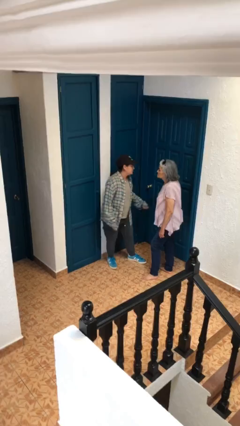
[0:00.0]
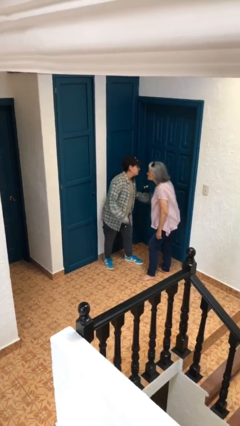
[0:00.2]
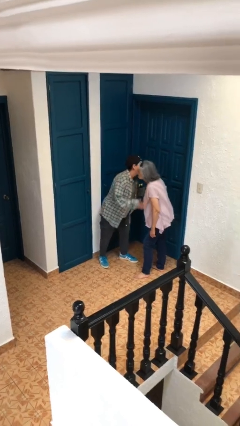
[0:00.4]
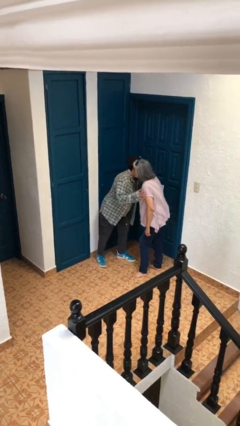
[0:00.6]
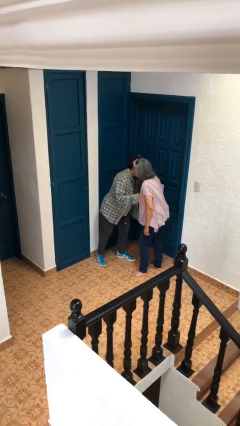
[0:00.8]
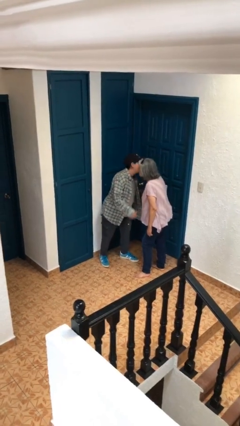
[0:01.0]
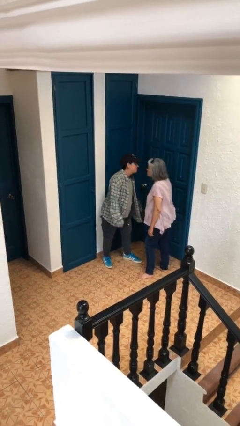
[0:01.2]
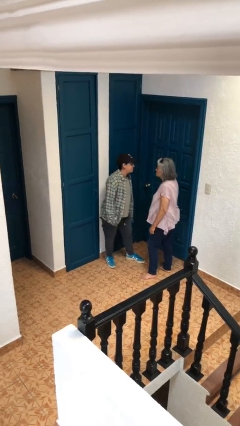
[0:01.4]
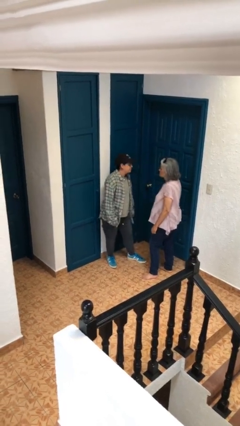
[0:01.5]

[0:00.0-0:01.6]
person kisses cheek of person

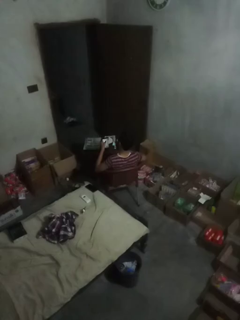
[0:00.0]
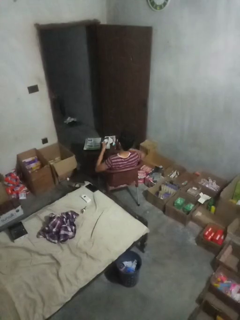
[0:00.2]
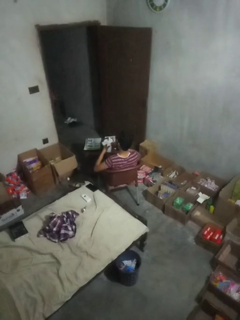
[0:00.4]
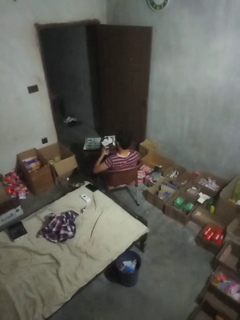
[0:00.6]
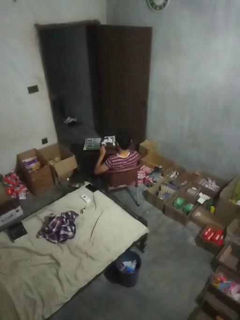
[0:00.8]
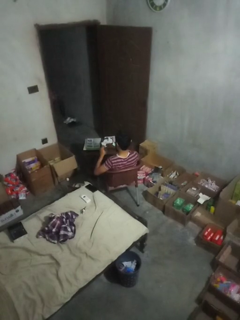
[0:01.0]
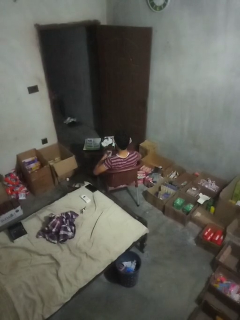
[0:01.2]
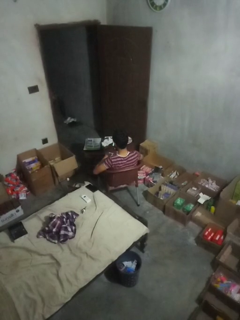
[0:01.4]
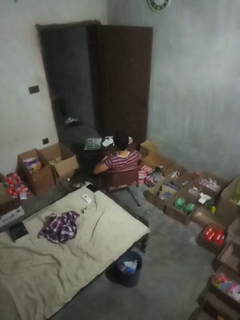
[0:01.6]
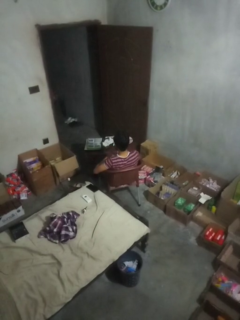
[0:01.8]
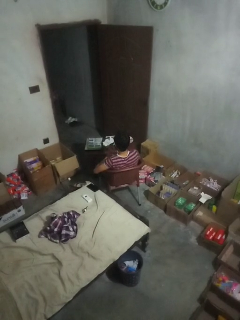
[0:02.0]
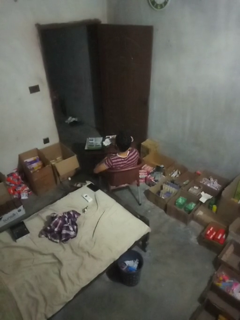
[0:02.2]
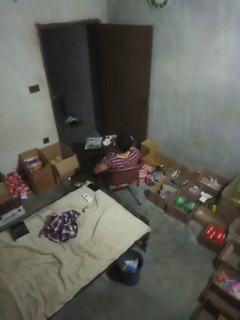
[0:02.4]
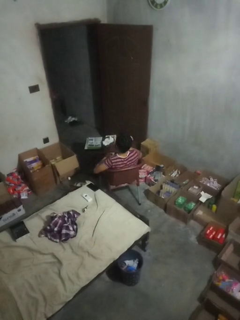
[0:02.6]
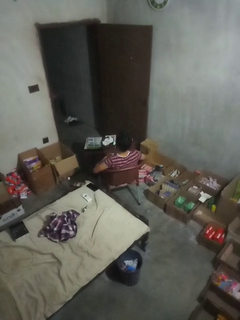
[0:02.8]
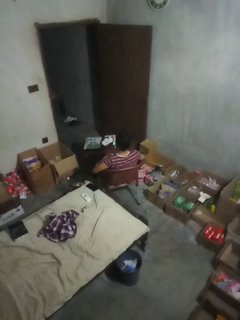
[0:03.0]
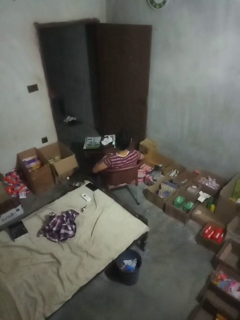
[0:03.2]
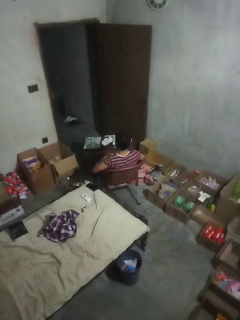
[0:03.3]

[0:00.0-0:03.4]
person takes medicine pills

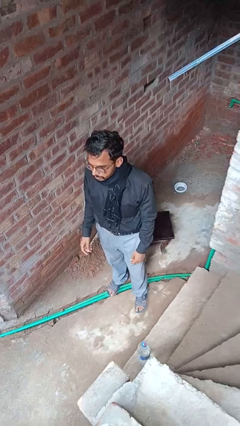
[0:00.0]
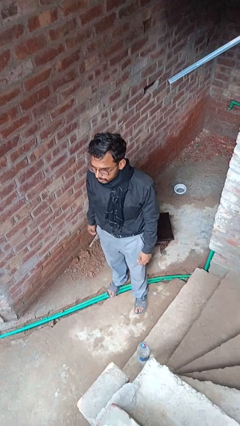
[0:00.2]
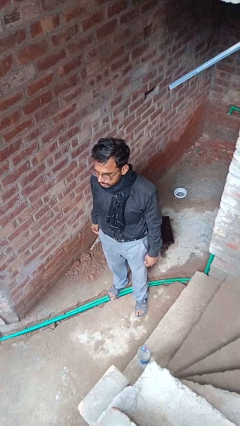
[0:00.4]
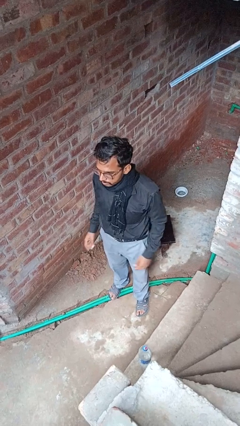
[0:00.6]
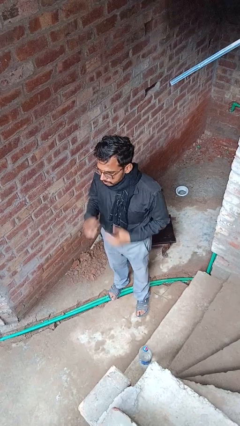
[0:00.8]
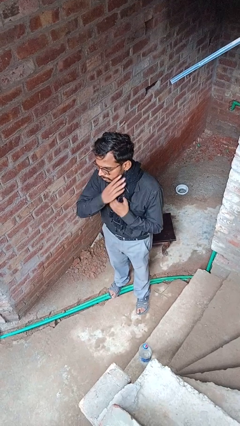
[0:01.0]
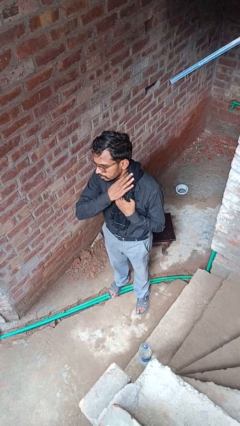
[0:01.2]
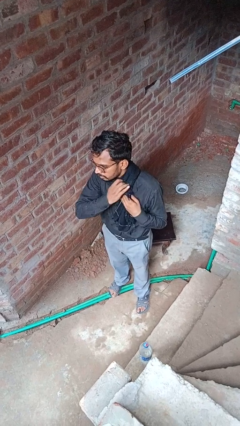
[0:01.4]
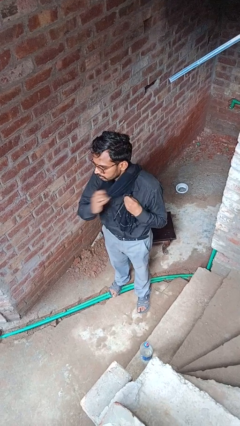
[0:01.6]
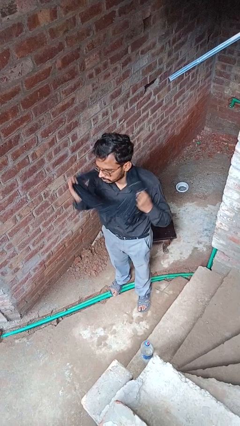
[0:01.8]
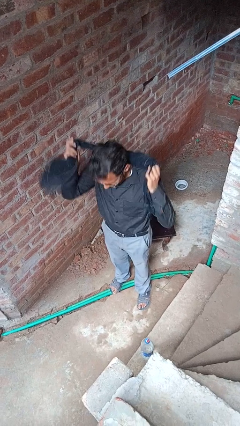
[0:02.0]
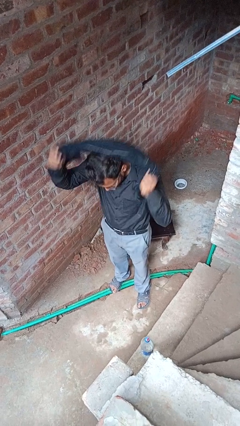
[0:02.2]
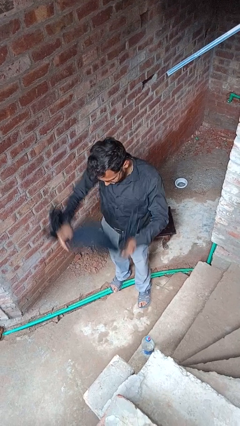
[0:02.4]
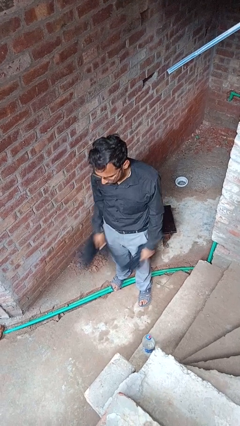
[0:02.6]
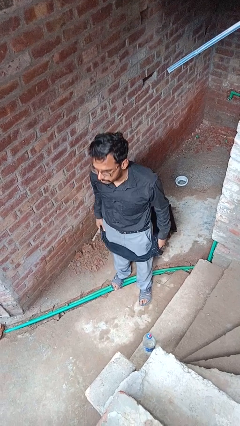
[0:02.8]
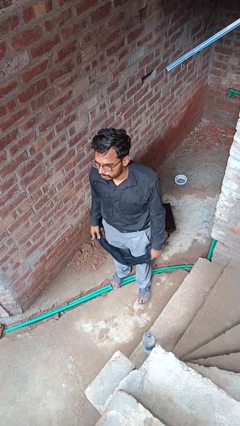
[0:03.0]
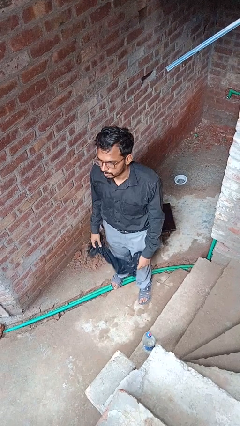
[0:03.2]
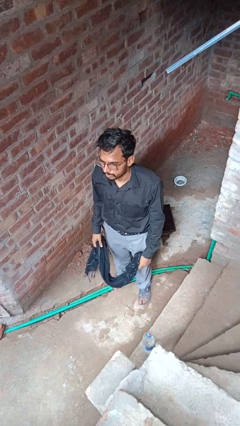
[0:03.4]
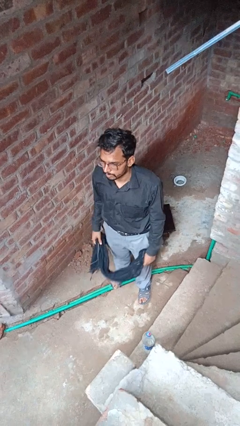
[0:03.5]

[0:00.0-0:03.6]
person takes off scarf

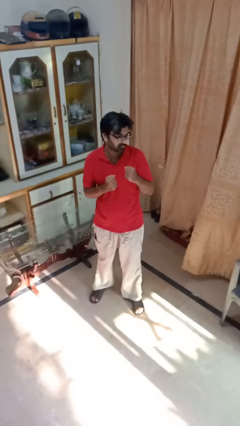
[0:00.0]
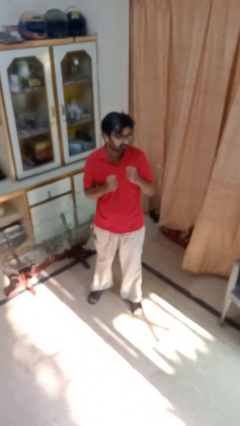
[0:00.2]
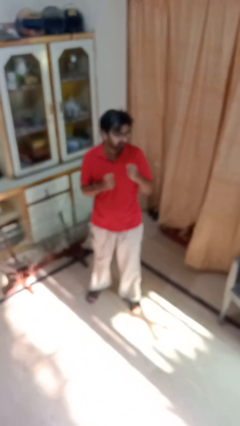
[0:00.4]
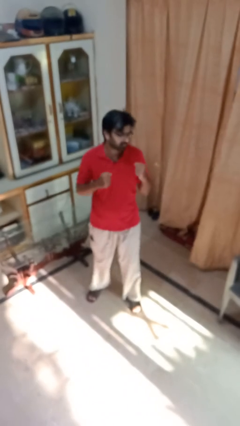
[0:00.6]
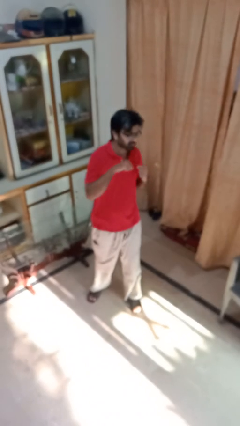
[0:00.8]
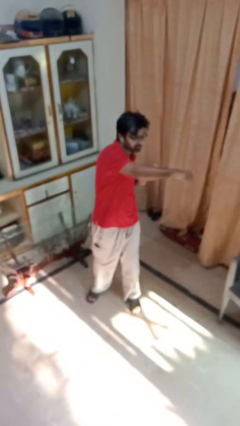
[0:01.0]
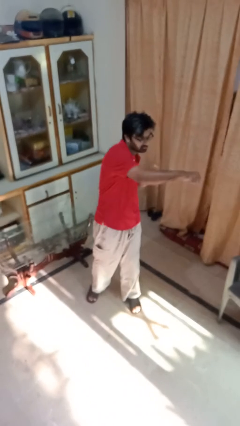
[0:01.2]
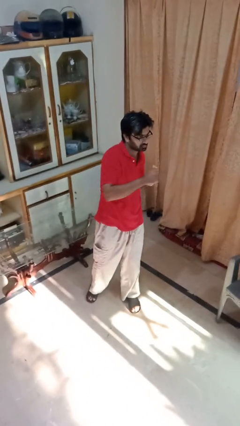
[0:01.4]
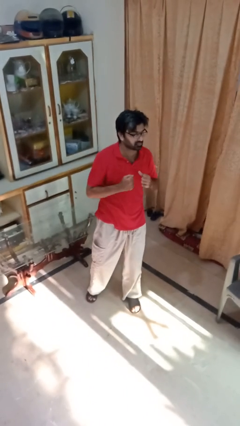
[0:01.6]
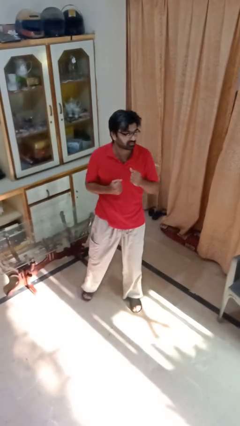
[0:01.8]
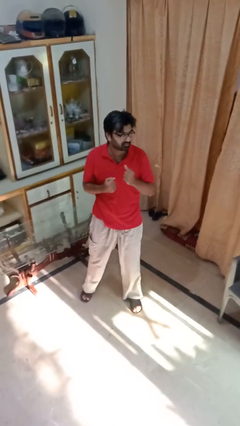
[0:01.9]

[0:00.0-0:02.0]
person punches

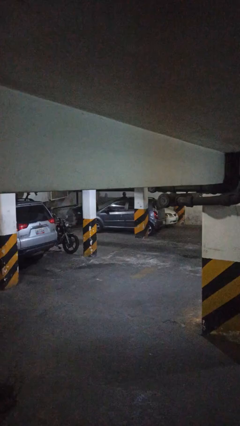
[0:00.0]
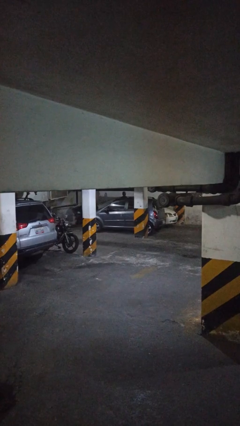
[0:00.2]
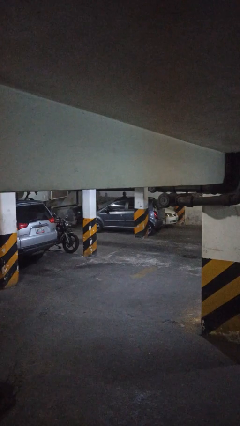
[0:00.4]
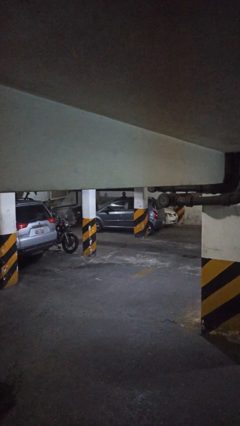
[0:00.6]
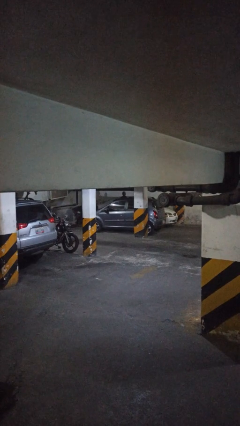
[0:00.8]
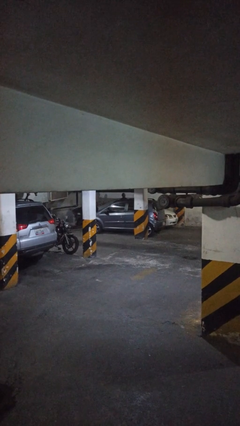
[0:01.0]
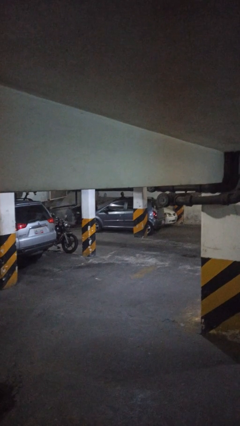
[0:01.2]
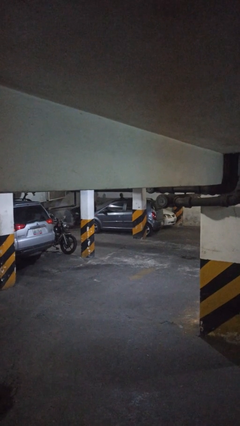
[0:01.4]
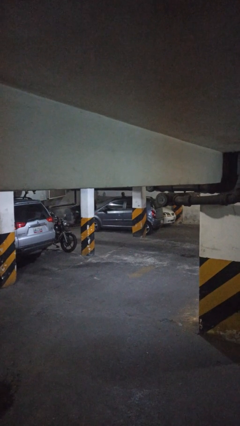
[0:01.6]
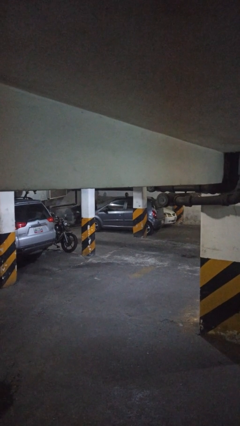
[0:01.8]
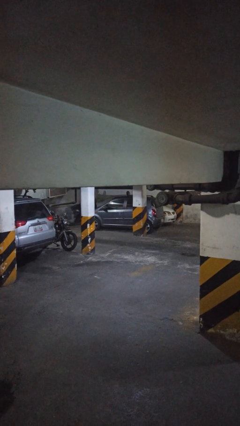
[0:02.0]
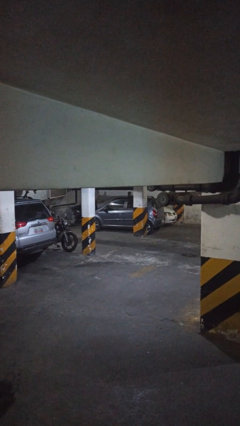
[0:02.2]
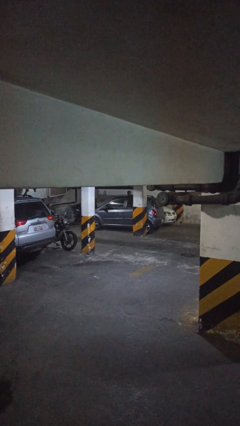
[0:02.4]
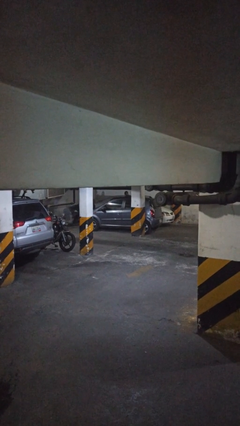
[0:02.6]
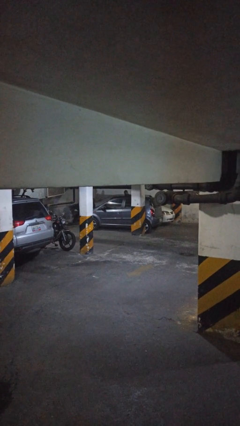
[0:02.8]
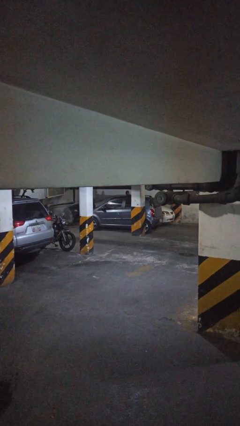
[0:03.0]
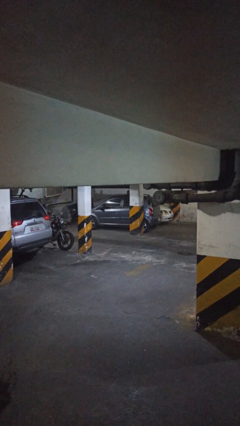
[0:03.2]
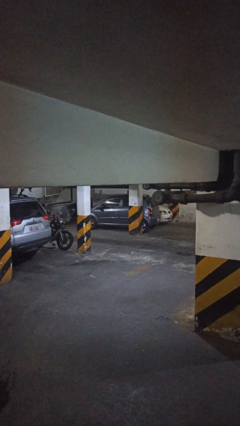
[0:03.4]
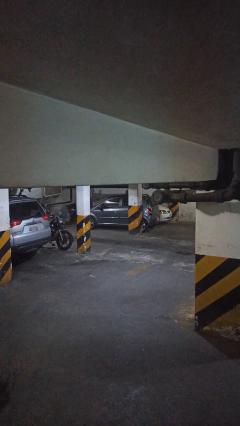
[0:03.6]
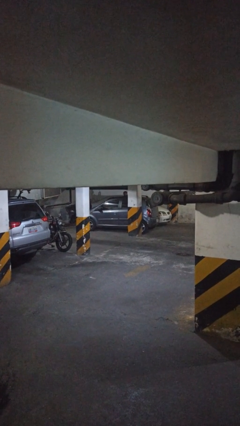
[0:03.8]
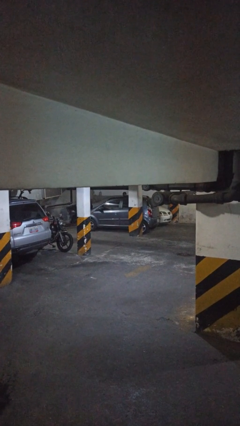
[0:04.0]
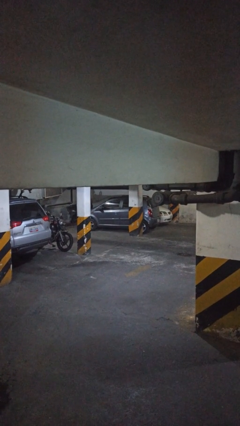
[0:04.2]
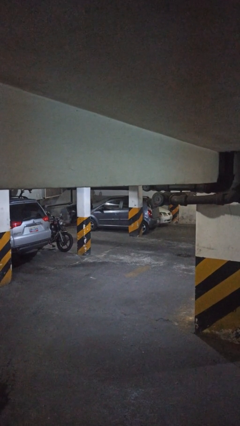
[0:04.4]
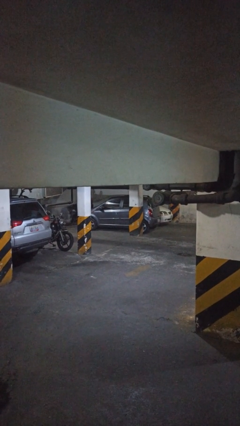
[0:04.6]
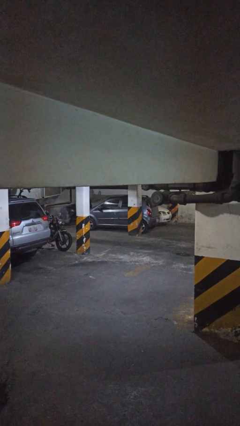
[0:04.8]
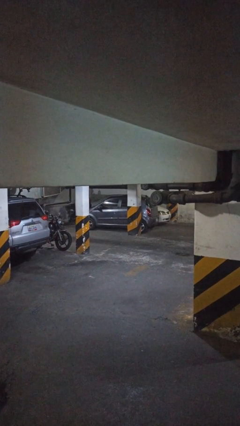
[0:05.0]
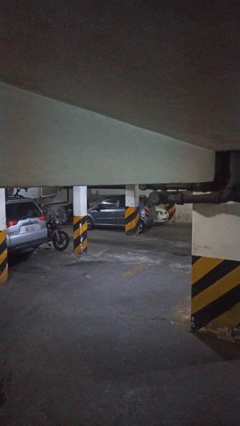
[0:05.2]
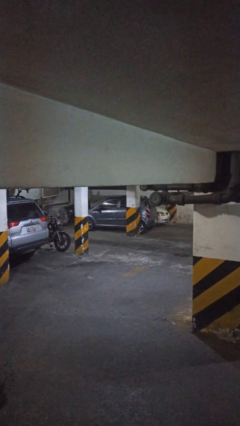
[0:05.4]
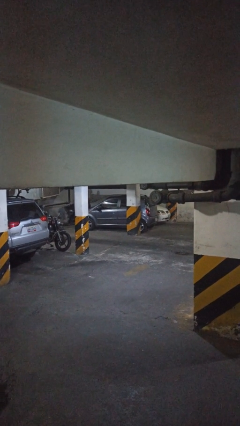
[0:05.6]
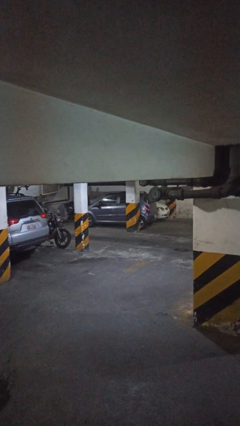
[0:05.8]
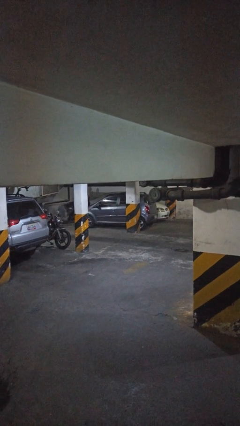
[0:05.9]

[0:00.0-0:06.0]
car picks up person

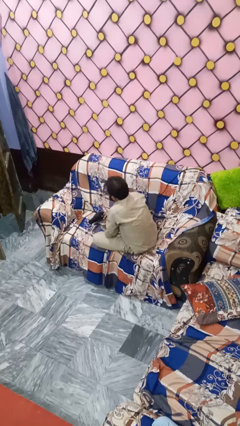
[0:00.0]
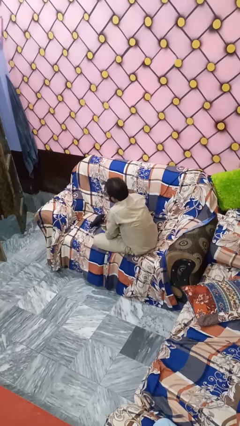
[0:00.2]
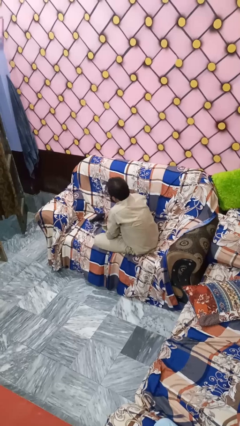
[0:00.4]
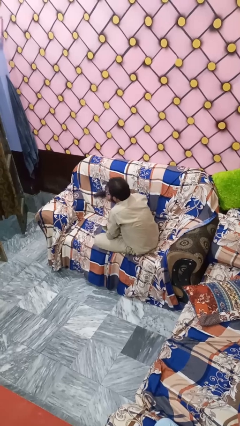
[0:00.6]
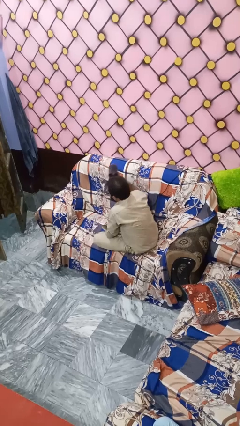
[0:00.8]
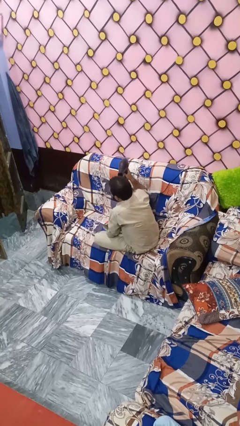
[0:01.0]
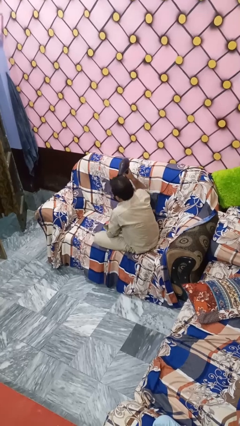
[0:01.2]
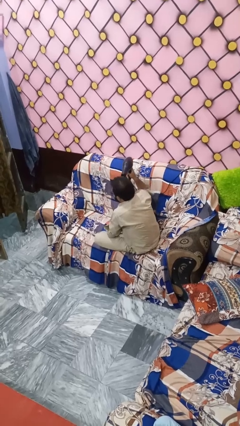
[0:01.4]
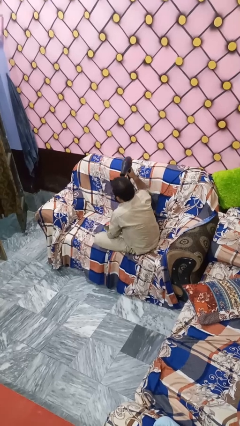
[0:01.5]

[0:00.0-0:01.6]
person dries hair with hairdryer
